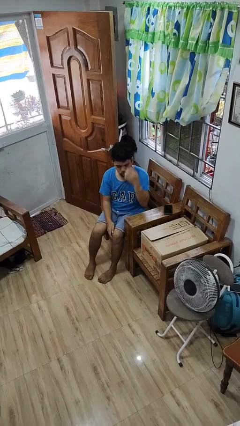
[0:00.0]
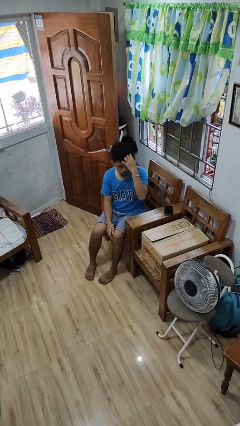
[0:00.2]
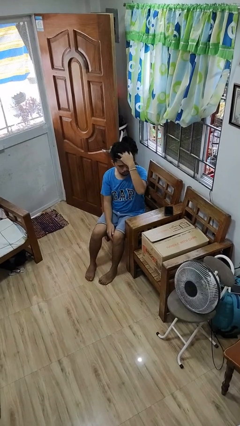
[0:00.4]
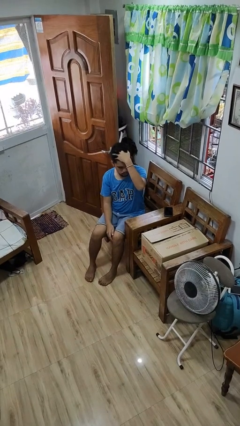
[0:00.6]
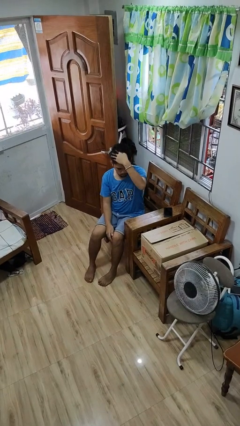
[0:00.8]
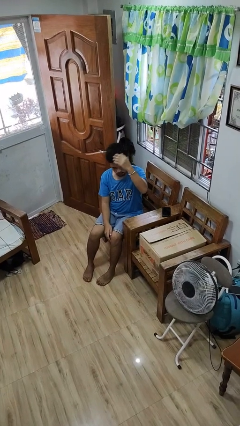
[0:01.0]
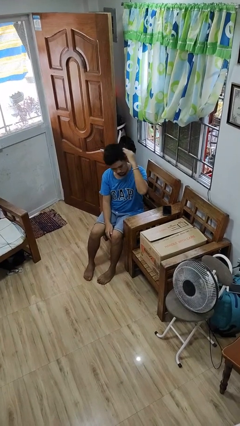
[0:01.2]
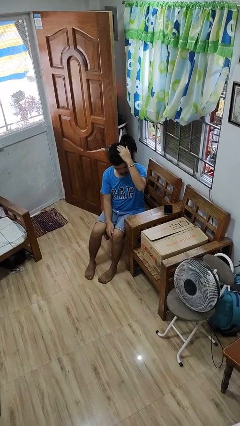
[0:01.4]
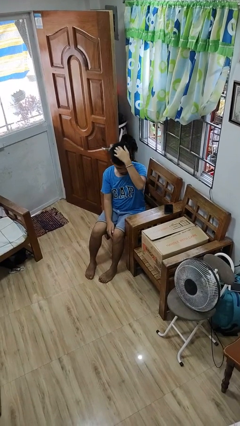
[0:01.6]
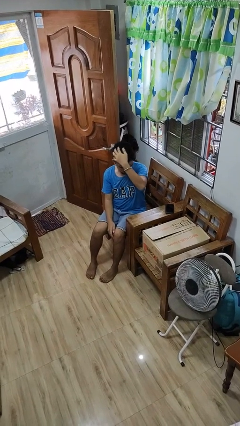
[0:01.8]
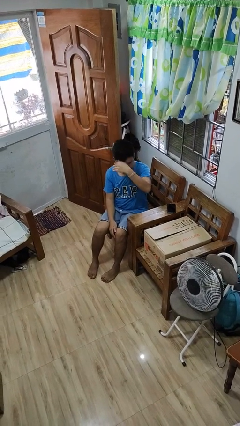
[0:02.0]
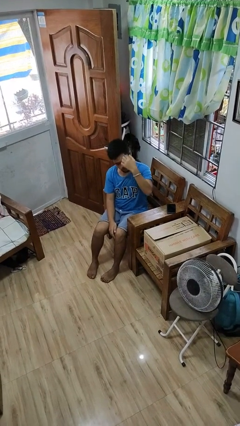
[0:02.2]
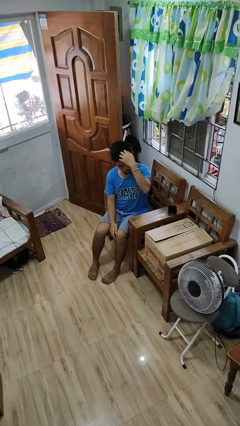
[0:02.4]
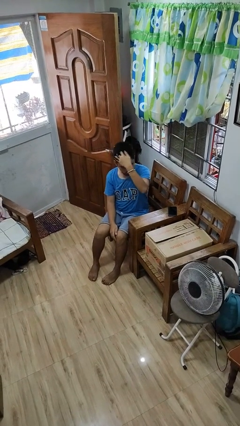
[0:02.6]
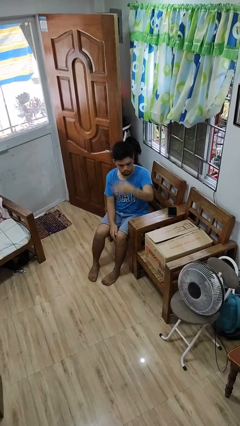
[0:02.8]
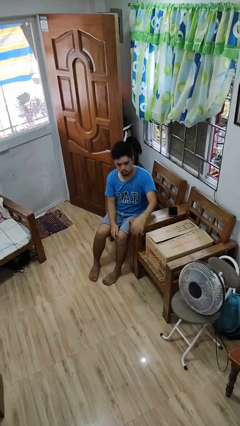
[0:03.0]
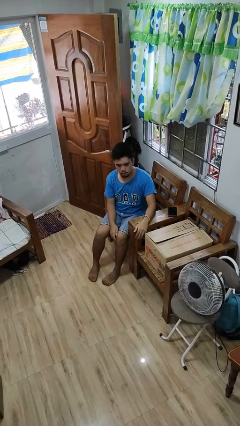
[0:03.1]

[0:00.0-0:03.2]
person strokes hair

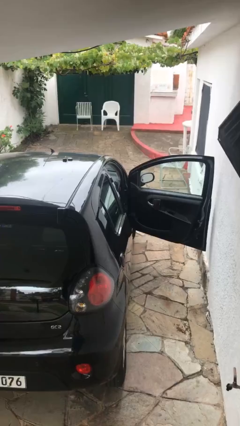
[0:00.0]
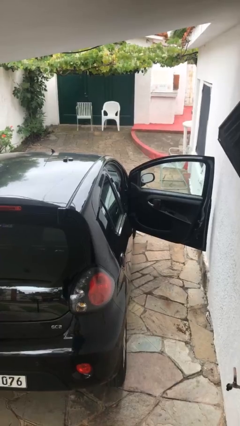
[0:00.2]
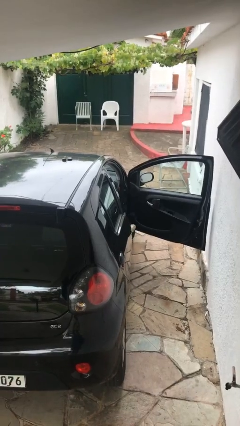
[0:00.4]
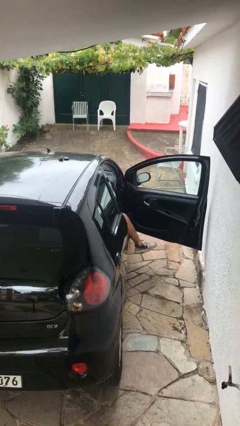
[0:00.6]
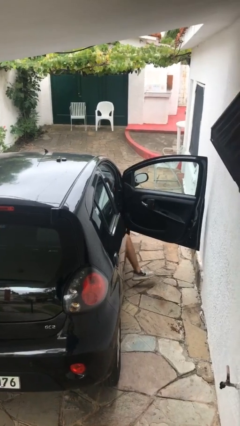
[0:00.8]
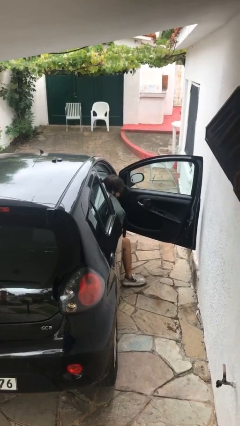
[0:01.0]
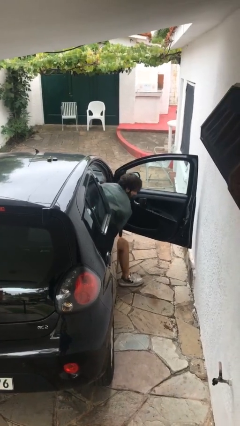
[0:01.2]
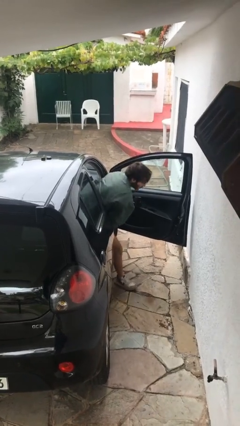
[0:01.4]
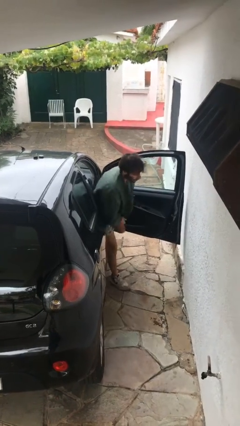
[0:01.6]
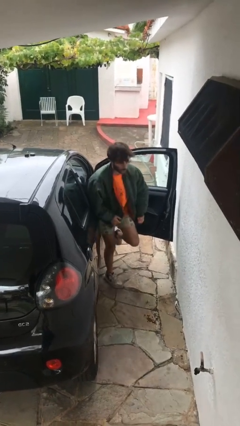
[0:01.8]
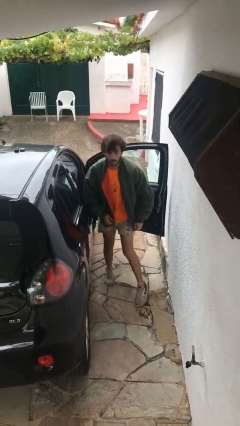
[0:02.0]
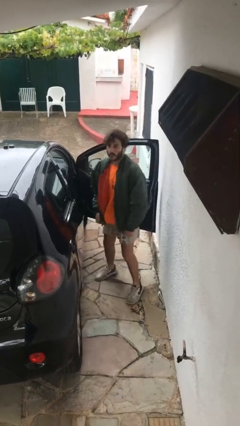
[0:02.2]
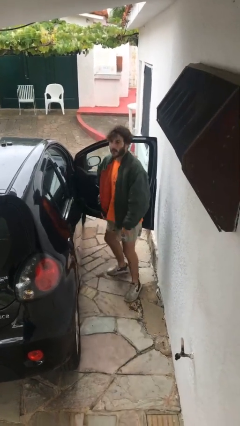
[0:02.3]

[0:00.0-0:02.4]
person exits car

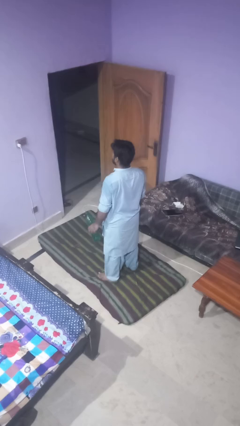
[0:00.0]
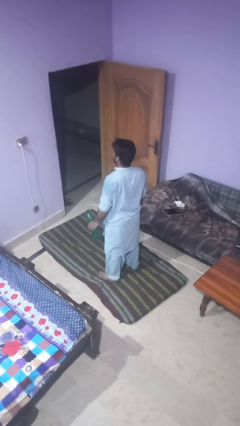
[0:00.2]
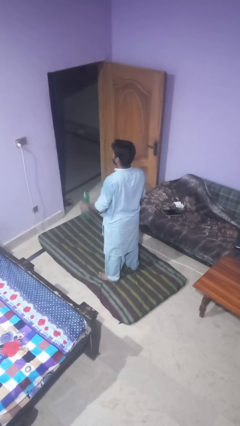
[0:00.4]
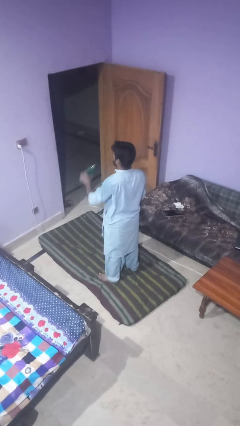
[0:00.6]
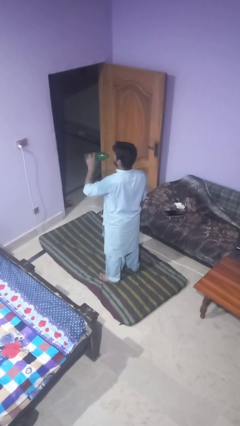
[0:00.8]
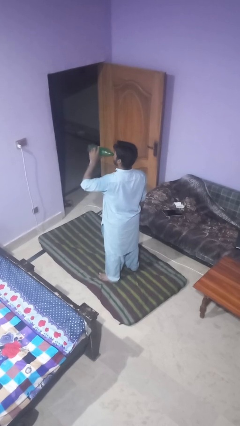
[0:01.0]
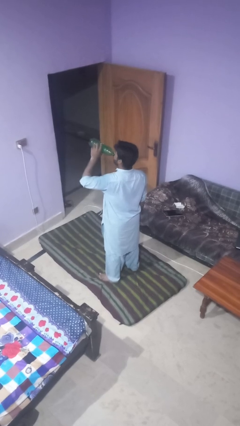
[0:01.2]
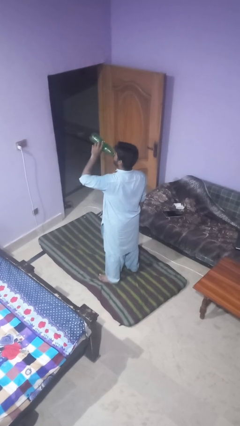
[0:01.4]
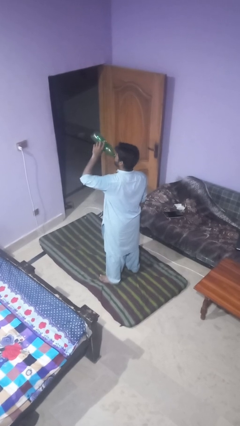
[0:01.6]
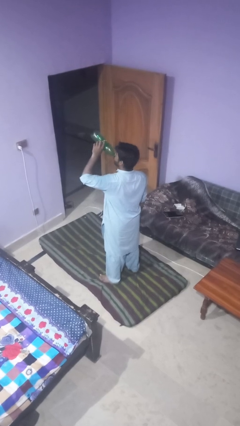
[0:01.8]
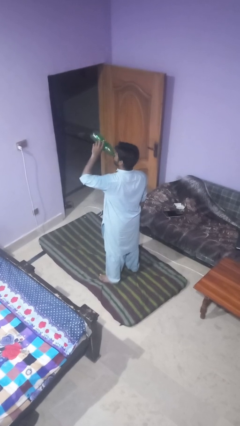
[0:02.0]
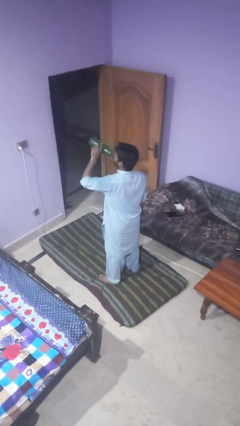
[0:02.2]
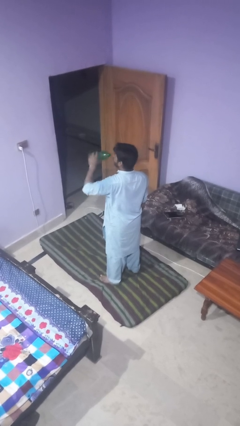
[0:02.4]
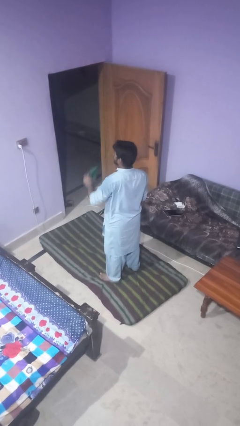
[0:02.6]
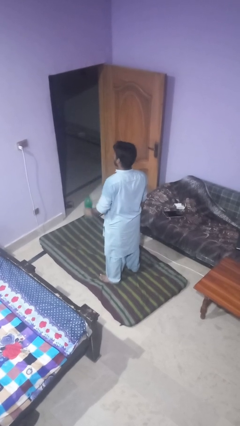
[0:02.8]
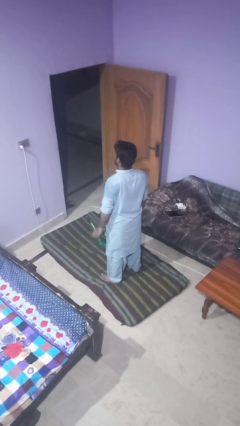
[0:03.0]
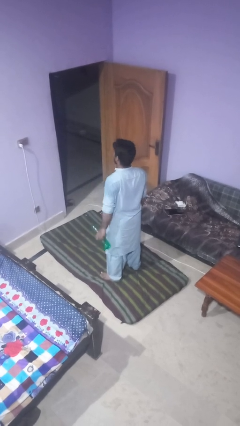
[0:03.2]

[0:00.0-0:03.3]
person drinks from bottle

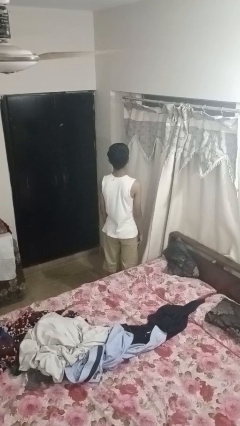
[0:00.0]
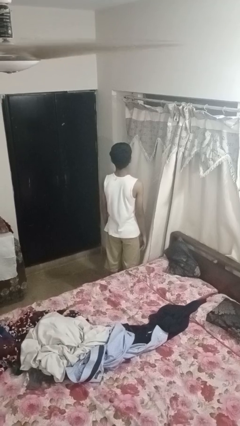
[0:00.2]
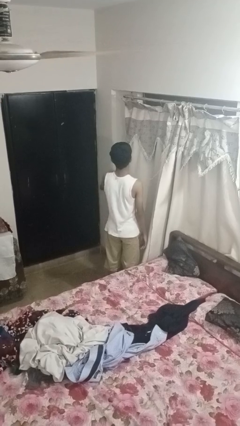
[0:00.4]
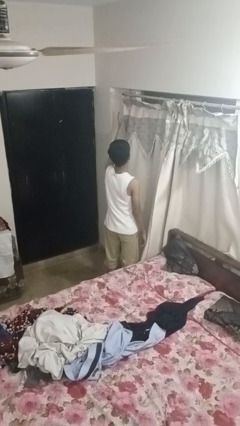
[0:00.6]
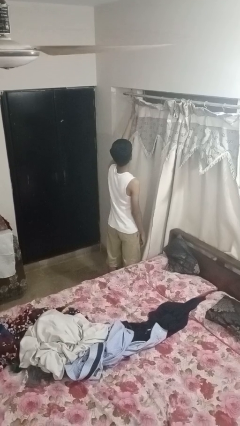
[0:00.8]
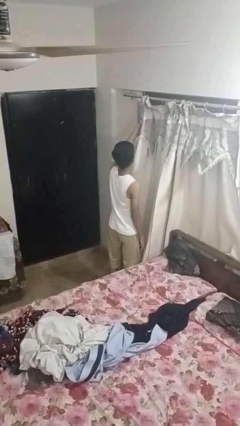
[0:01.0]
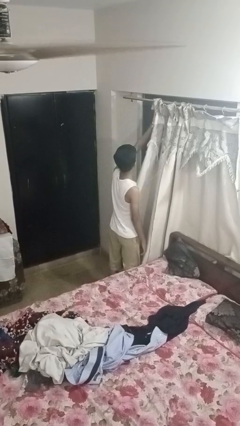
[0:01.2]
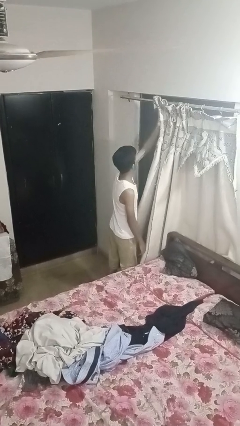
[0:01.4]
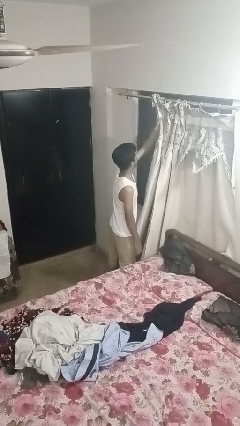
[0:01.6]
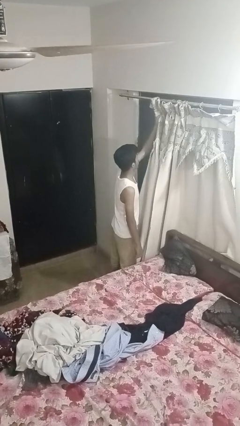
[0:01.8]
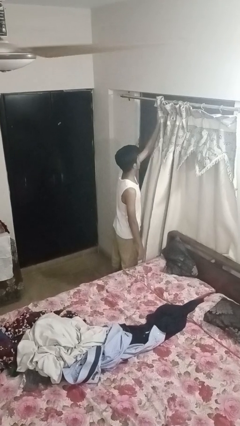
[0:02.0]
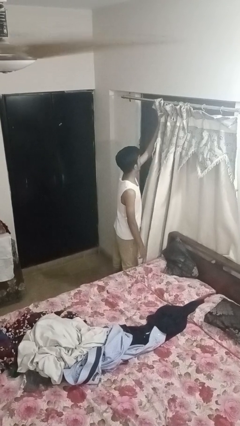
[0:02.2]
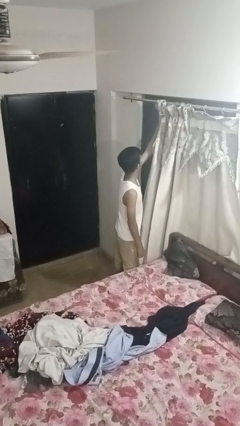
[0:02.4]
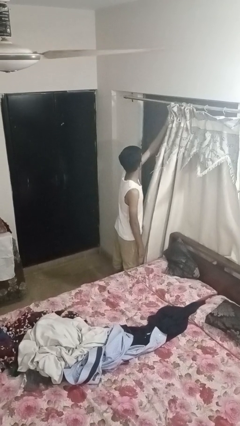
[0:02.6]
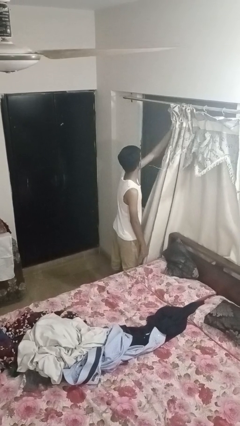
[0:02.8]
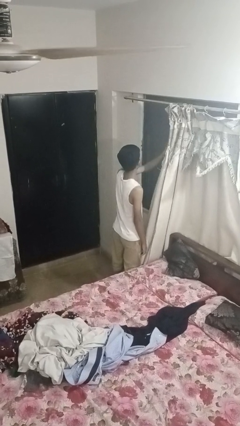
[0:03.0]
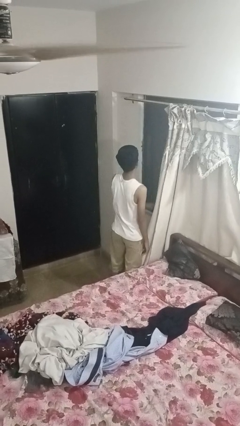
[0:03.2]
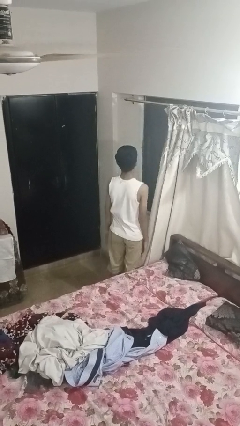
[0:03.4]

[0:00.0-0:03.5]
person opens curtains

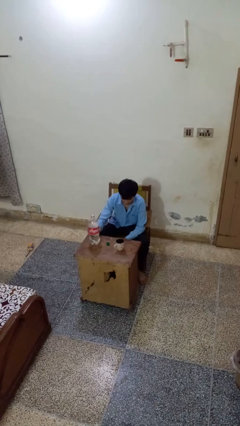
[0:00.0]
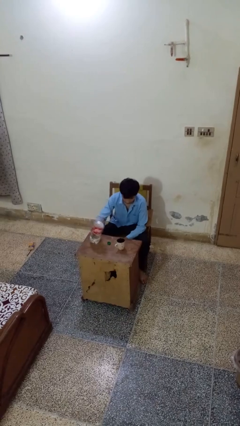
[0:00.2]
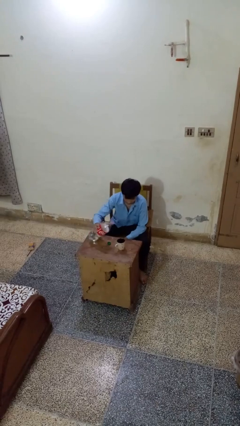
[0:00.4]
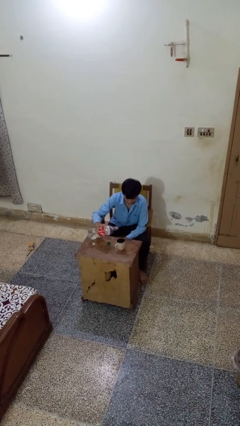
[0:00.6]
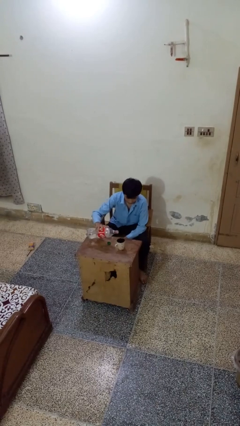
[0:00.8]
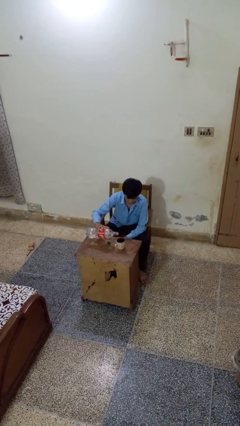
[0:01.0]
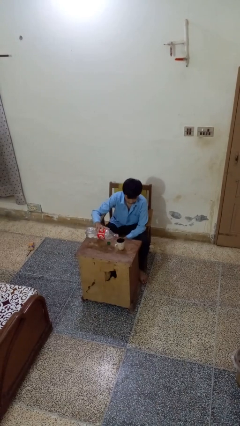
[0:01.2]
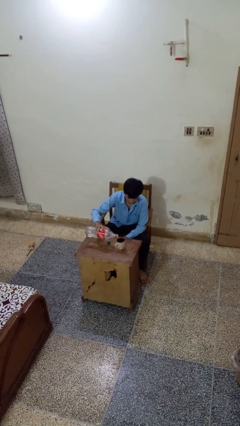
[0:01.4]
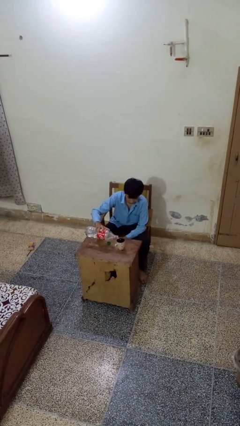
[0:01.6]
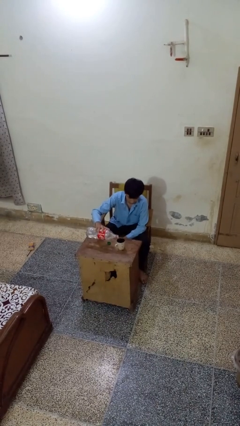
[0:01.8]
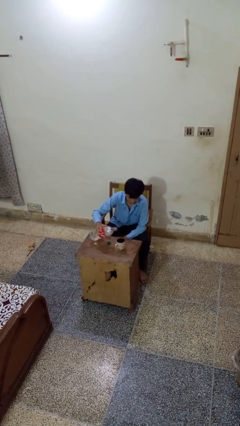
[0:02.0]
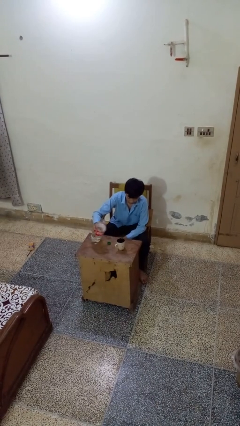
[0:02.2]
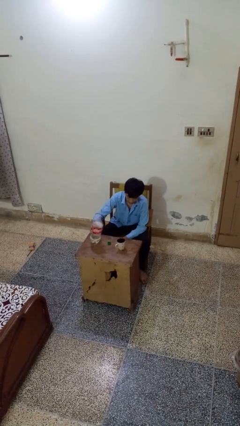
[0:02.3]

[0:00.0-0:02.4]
person pours liquid into cup

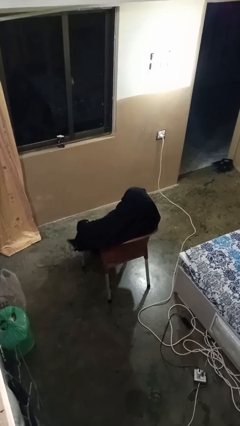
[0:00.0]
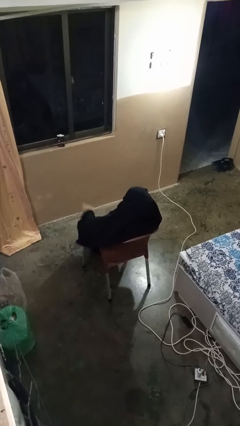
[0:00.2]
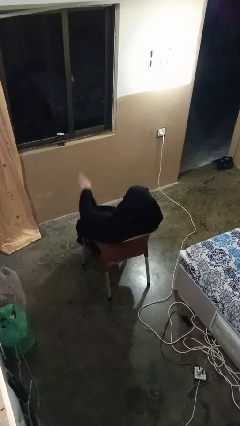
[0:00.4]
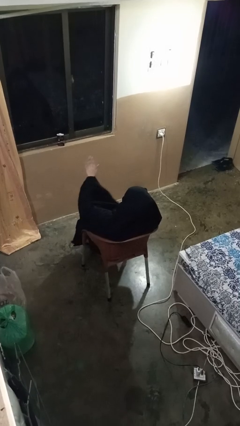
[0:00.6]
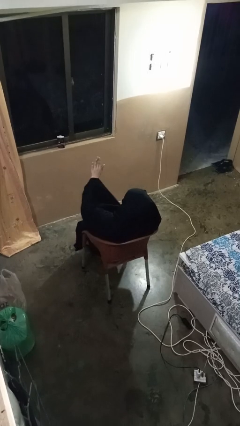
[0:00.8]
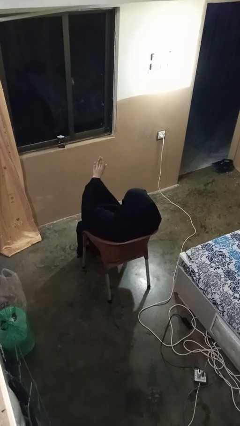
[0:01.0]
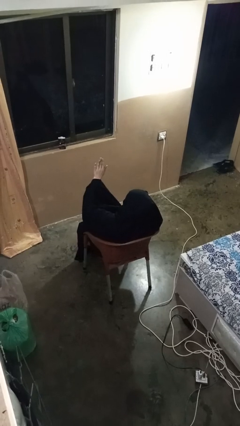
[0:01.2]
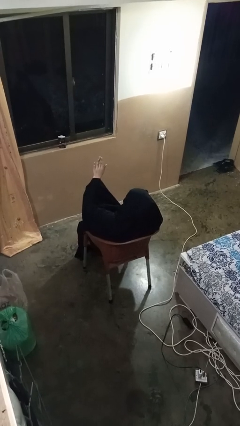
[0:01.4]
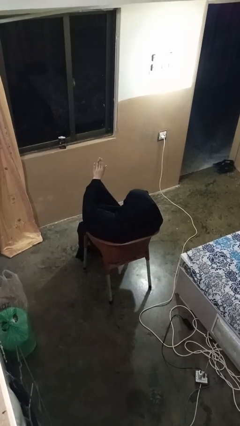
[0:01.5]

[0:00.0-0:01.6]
person gestures raise hand

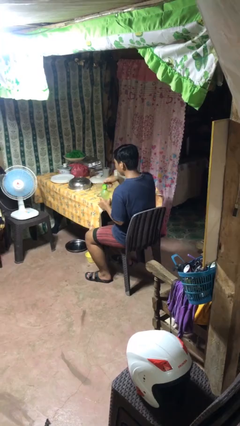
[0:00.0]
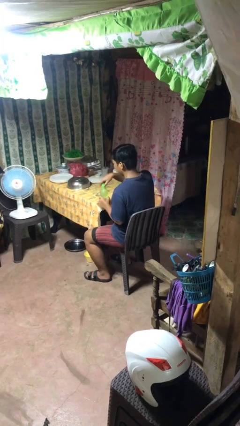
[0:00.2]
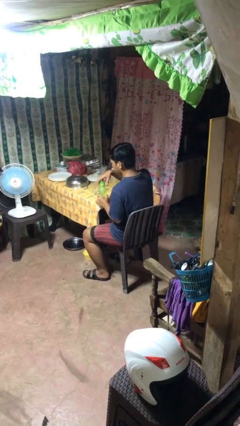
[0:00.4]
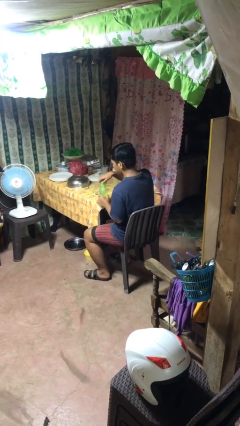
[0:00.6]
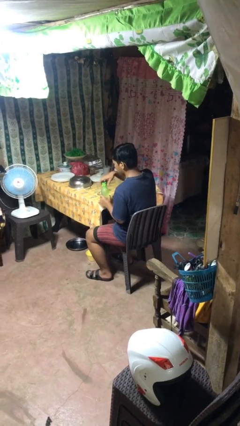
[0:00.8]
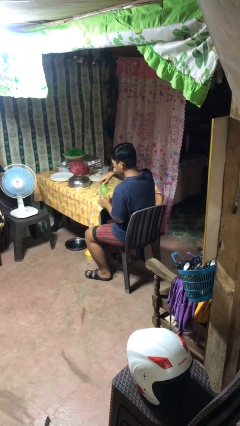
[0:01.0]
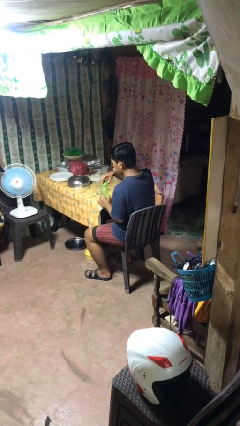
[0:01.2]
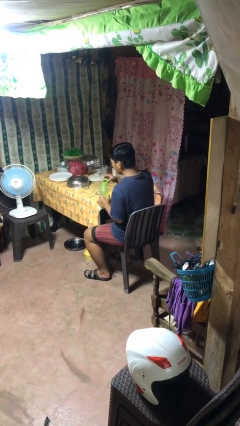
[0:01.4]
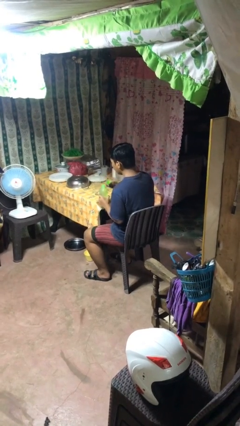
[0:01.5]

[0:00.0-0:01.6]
person unscrews lid from bottle
